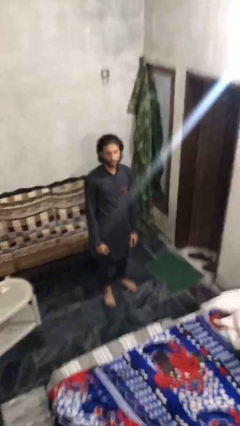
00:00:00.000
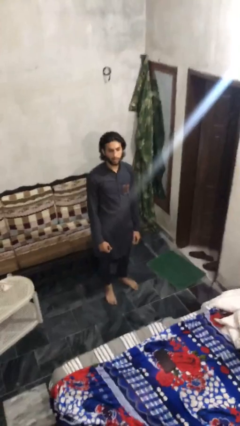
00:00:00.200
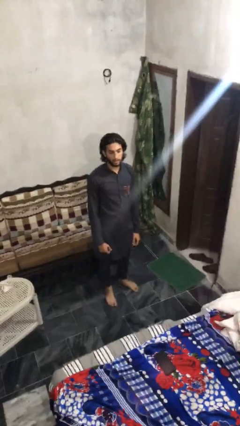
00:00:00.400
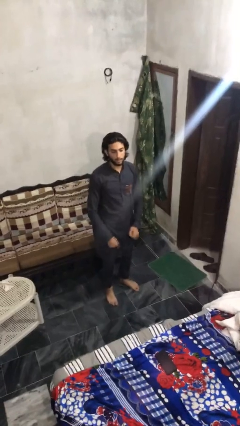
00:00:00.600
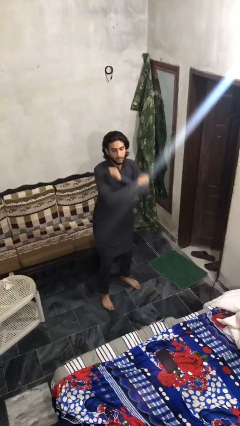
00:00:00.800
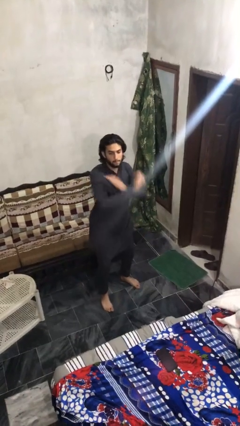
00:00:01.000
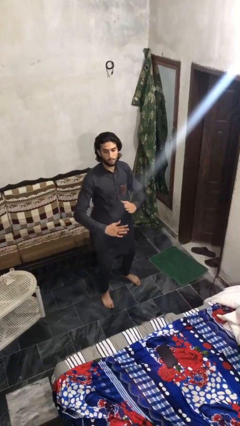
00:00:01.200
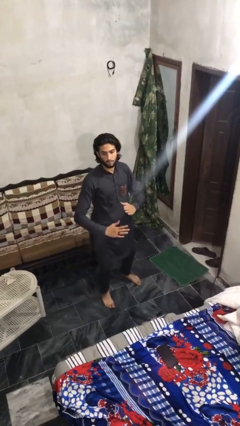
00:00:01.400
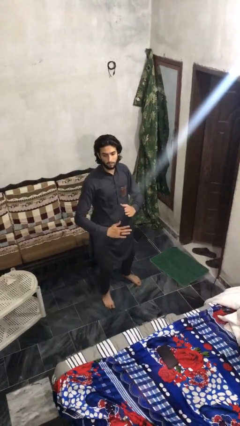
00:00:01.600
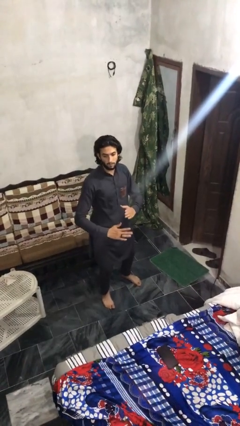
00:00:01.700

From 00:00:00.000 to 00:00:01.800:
person karate chop

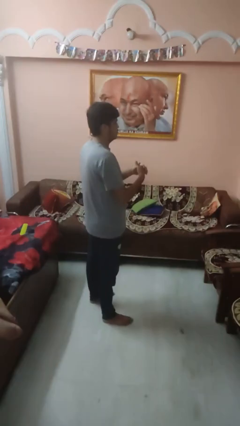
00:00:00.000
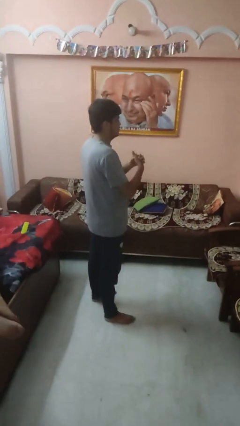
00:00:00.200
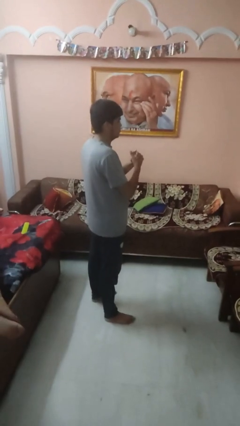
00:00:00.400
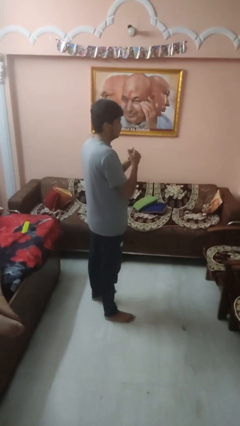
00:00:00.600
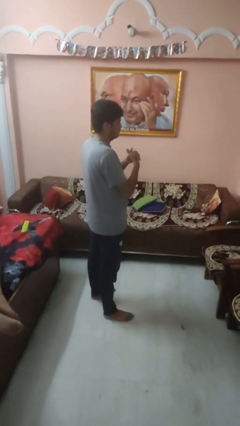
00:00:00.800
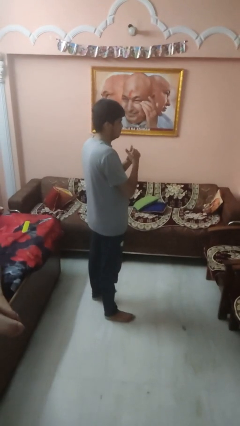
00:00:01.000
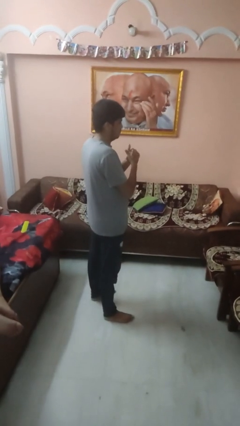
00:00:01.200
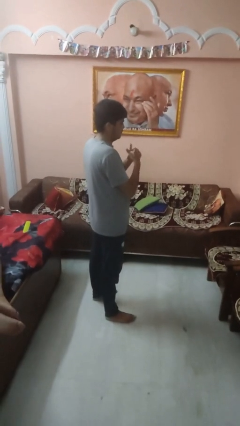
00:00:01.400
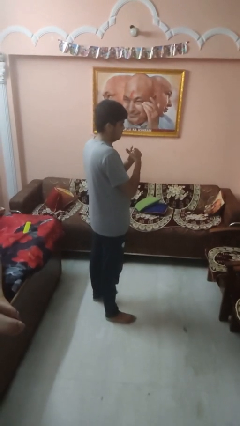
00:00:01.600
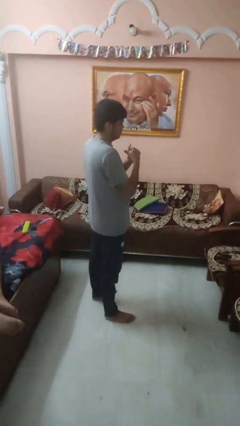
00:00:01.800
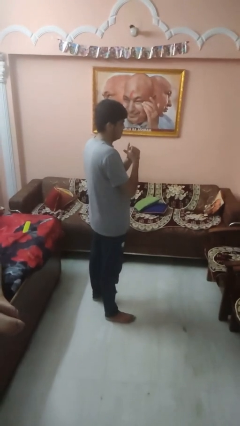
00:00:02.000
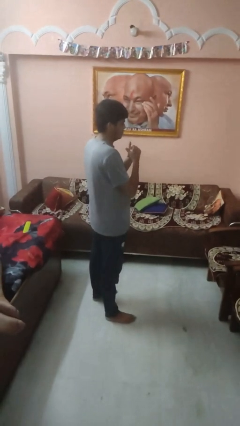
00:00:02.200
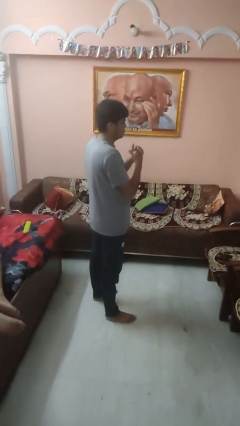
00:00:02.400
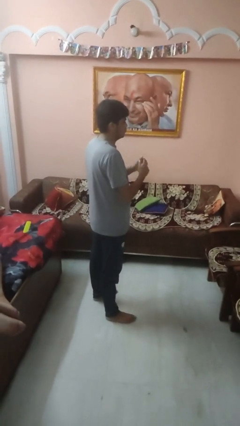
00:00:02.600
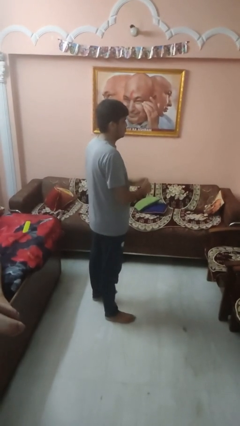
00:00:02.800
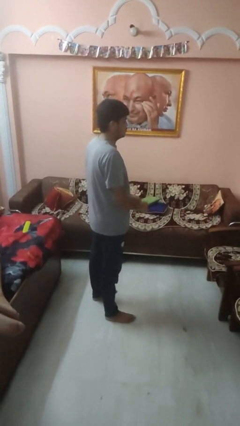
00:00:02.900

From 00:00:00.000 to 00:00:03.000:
person cracks knuckles

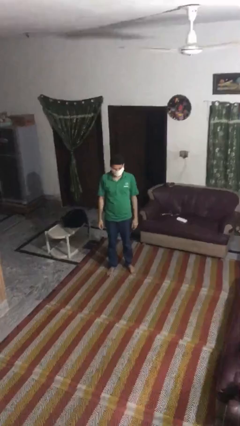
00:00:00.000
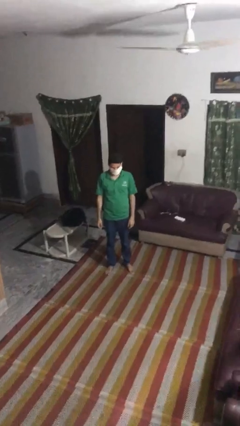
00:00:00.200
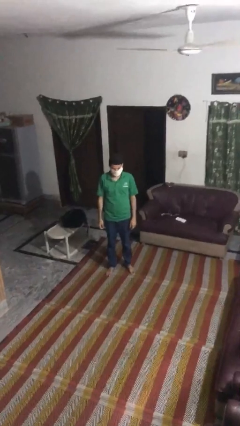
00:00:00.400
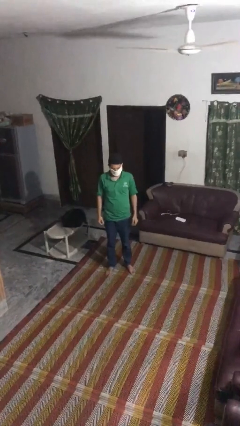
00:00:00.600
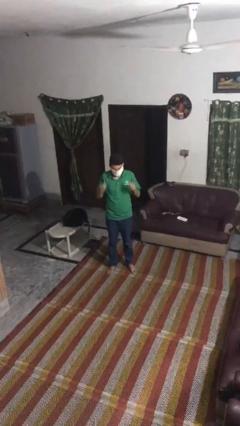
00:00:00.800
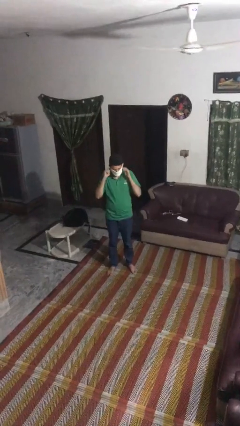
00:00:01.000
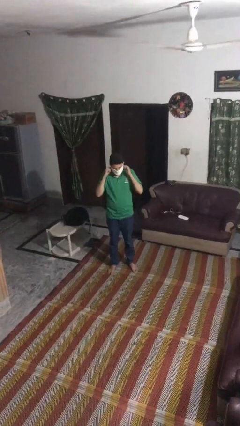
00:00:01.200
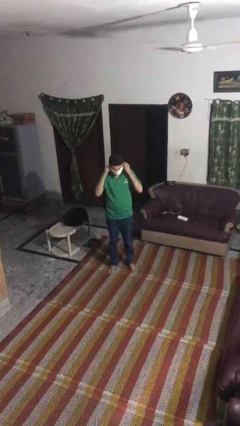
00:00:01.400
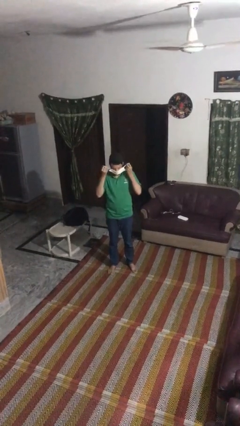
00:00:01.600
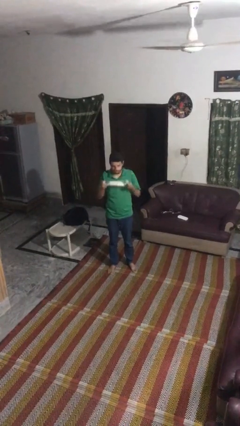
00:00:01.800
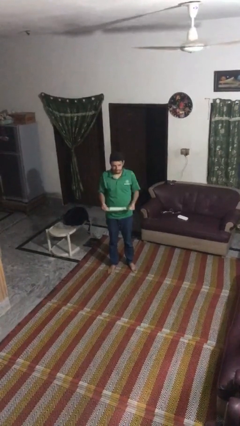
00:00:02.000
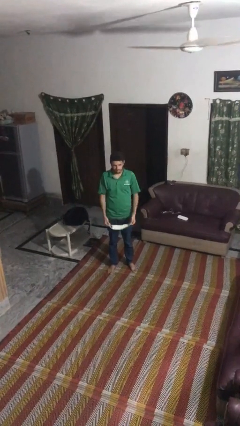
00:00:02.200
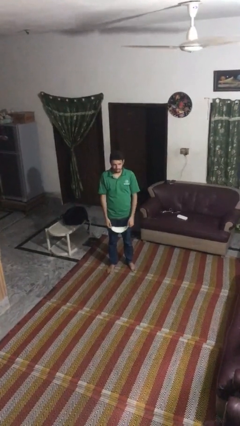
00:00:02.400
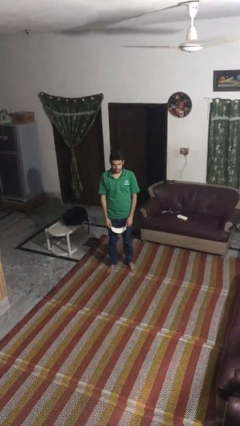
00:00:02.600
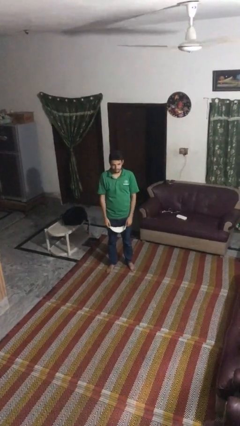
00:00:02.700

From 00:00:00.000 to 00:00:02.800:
person takes off facemask

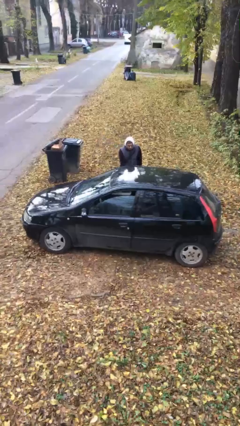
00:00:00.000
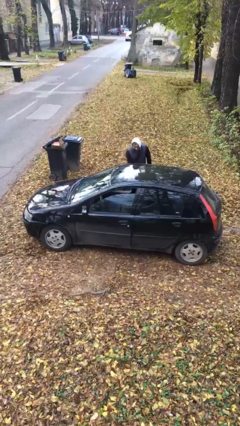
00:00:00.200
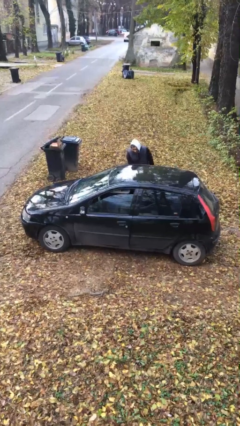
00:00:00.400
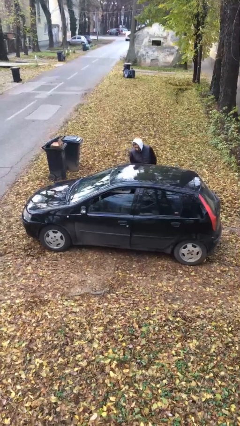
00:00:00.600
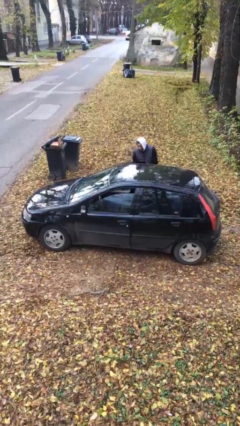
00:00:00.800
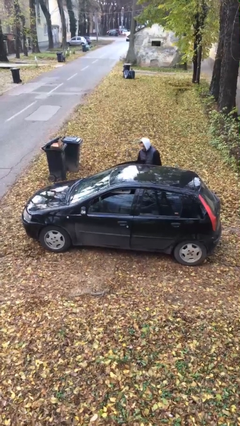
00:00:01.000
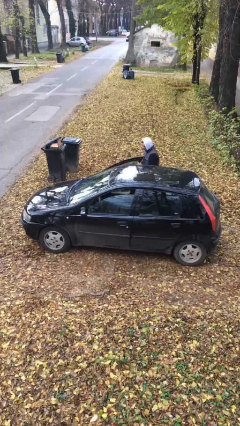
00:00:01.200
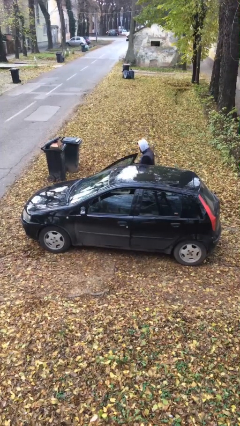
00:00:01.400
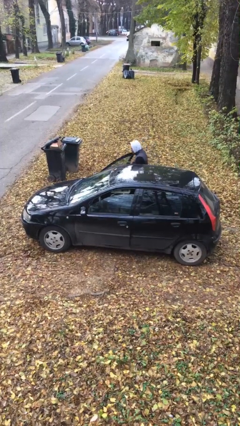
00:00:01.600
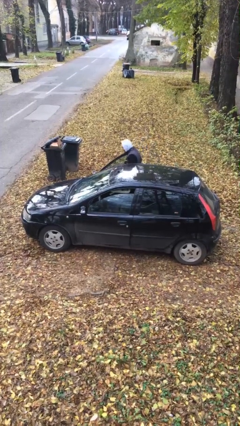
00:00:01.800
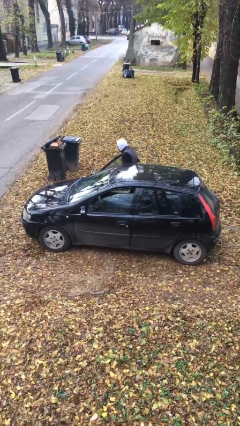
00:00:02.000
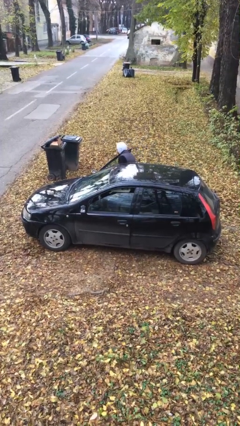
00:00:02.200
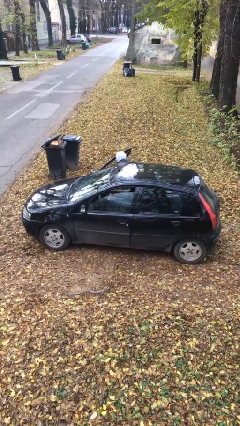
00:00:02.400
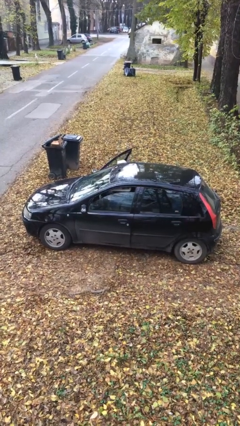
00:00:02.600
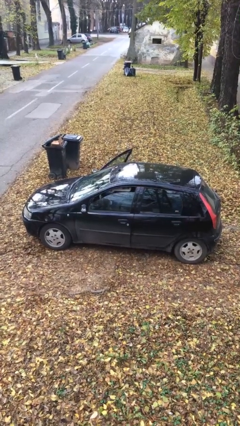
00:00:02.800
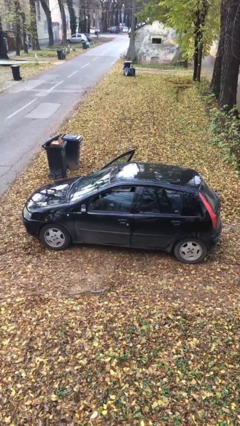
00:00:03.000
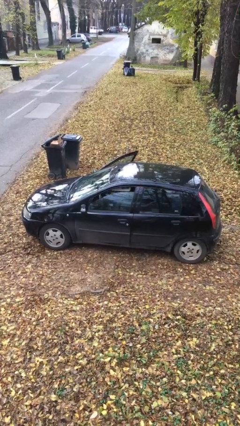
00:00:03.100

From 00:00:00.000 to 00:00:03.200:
car picks up person

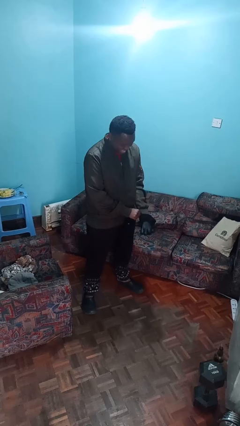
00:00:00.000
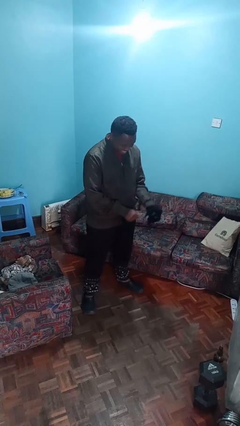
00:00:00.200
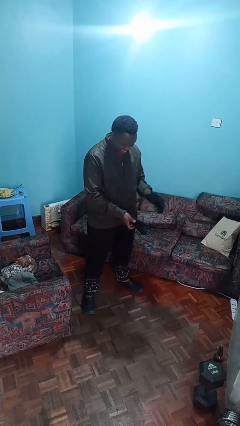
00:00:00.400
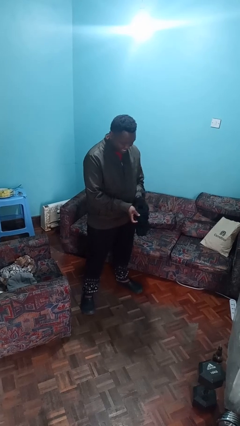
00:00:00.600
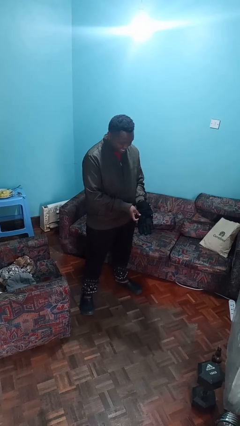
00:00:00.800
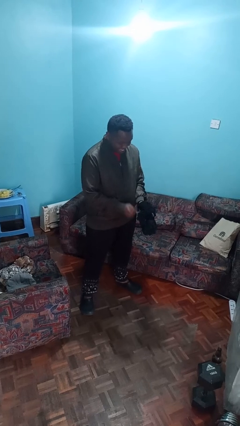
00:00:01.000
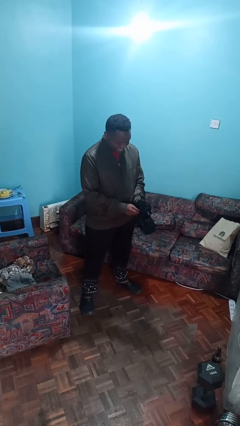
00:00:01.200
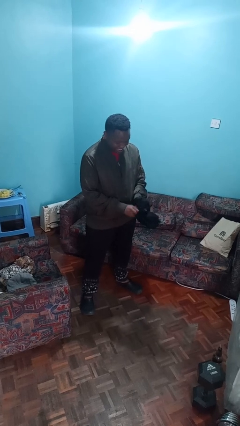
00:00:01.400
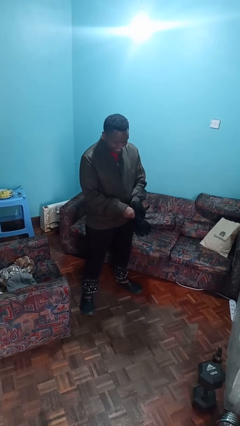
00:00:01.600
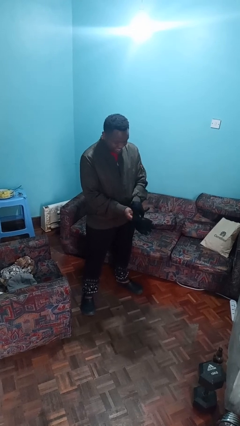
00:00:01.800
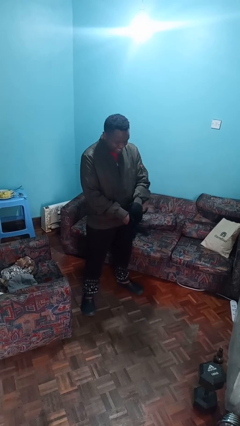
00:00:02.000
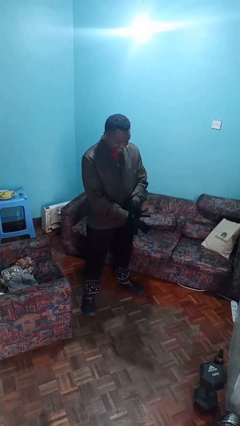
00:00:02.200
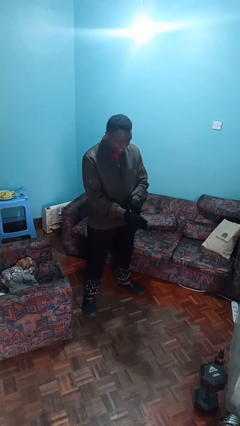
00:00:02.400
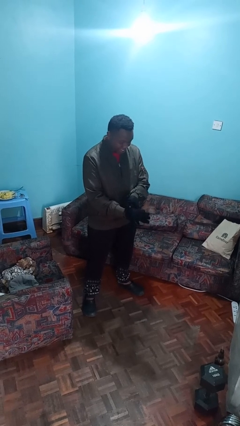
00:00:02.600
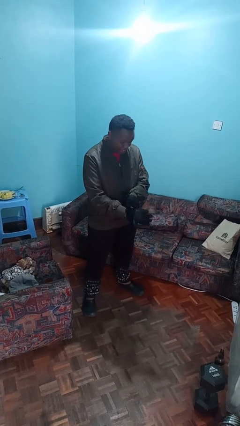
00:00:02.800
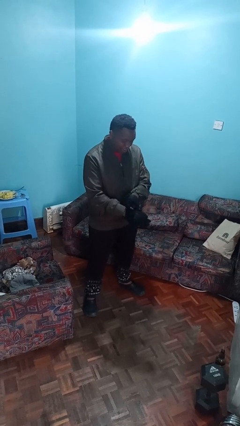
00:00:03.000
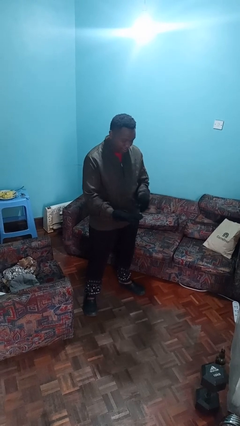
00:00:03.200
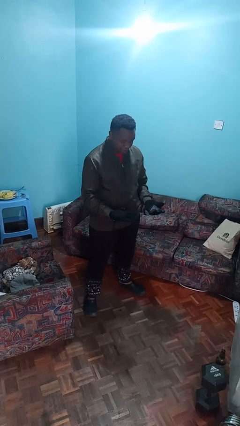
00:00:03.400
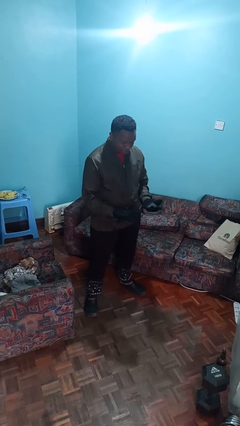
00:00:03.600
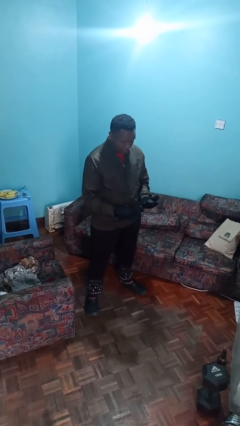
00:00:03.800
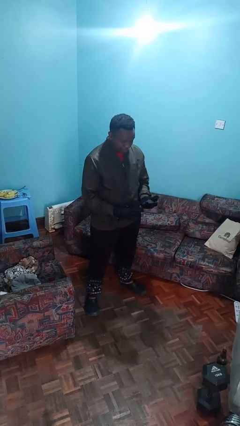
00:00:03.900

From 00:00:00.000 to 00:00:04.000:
person puts on gloves

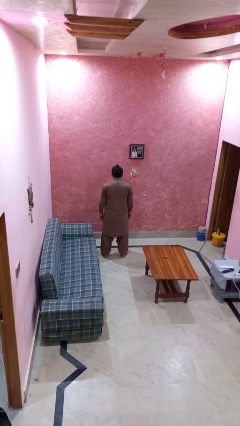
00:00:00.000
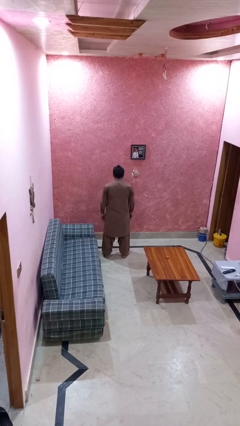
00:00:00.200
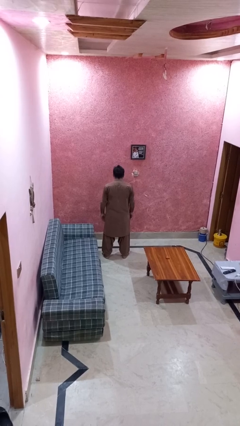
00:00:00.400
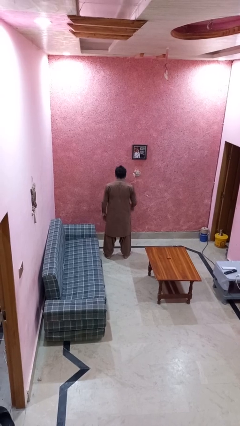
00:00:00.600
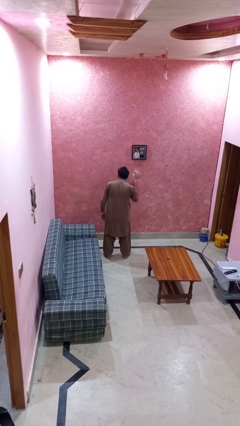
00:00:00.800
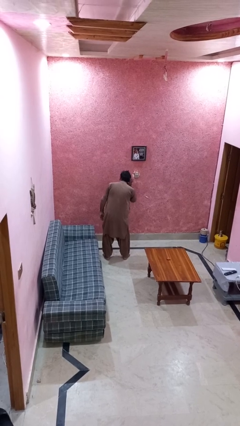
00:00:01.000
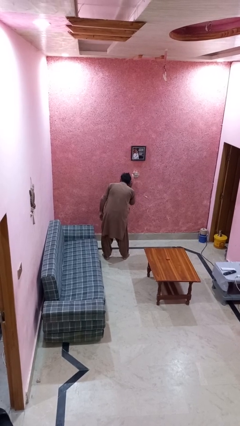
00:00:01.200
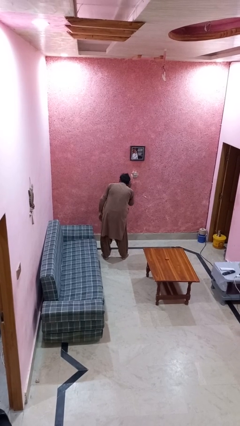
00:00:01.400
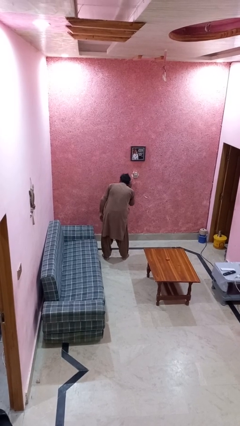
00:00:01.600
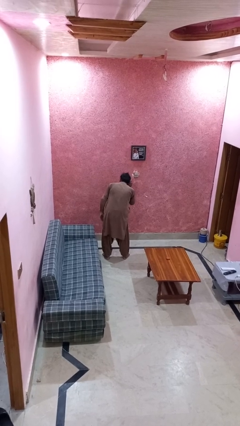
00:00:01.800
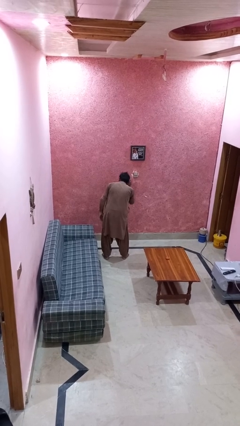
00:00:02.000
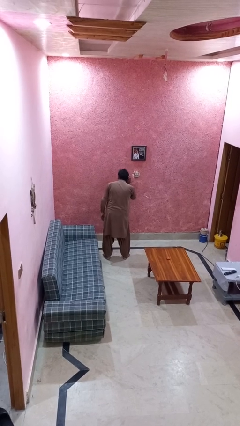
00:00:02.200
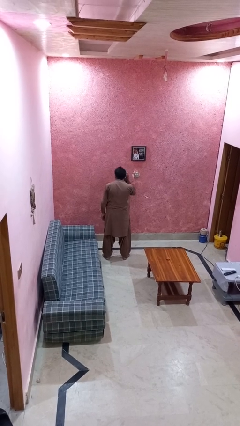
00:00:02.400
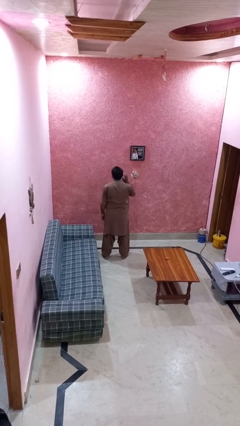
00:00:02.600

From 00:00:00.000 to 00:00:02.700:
person gestures listen closely
